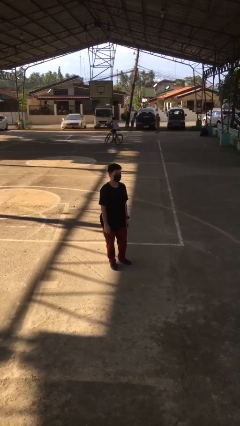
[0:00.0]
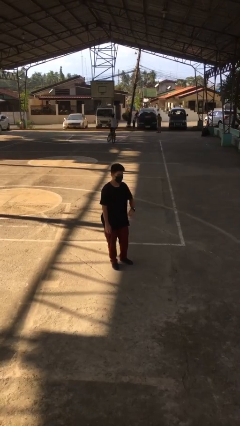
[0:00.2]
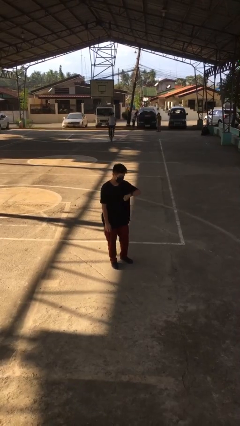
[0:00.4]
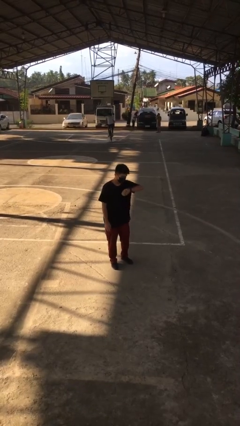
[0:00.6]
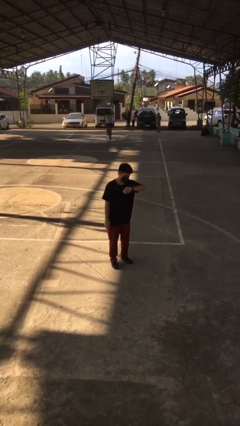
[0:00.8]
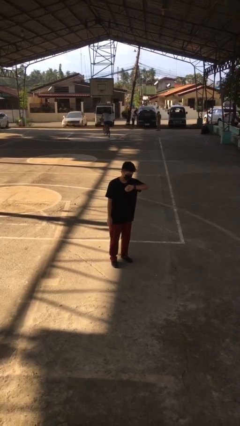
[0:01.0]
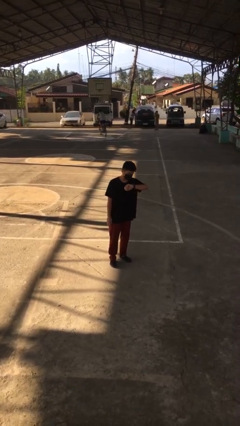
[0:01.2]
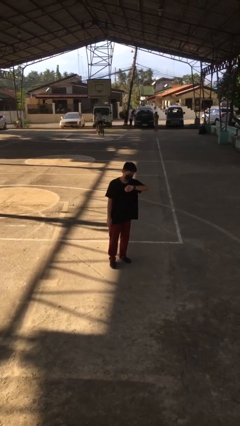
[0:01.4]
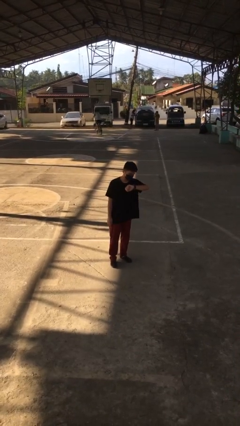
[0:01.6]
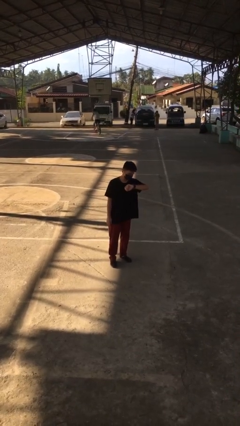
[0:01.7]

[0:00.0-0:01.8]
person looks at wristwatch

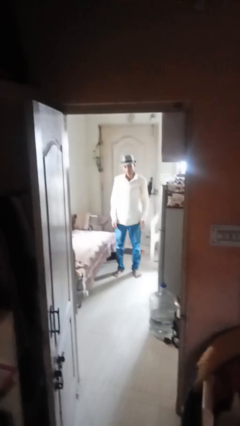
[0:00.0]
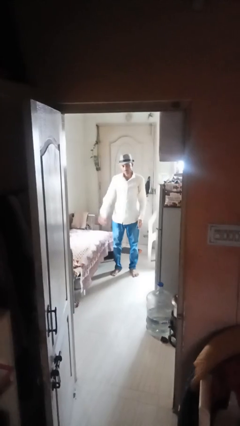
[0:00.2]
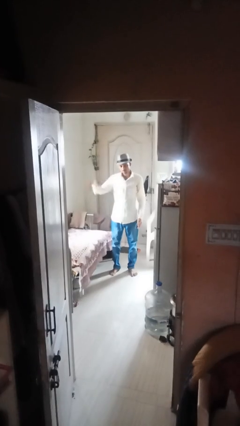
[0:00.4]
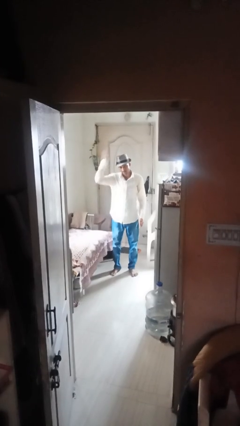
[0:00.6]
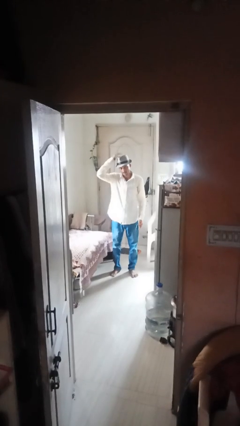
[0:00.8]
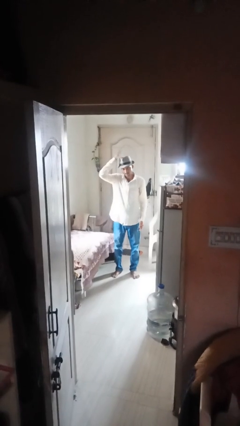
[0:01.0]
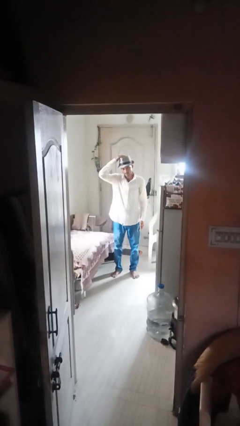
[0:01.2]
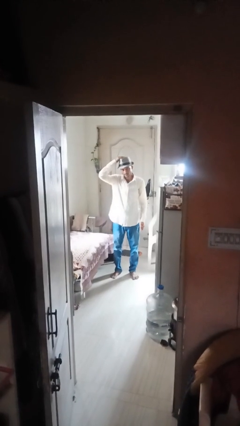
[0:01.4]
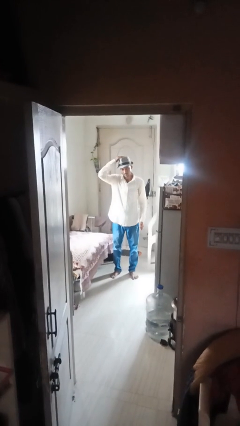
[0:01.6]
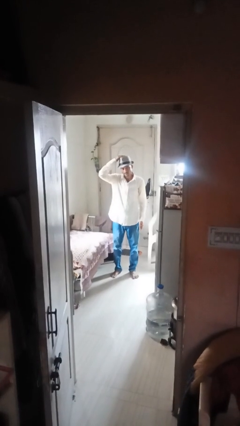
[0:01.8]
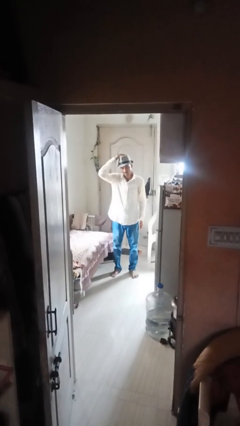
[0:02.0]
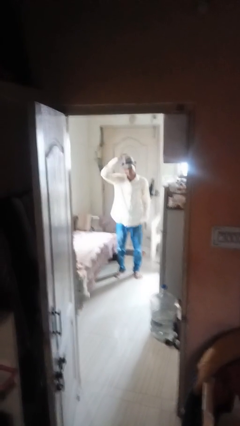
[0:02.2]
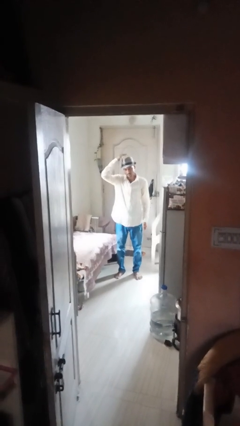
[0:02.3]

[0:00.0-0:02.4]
person pats head

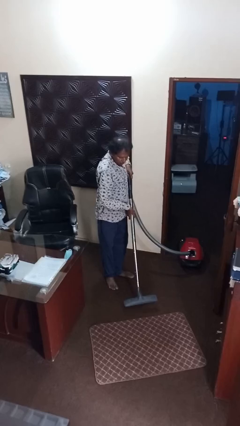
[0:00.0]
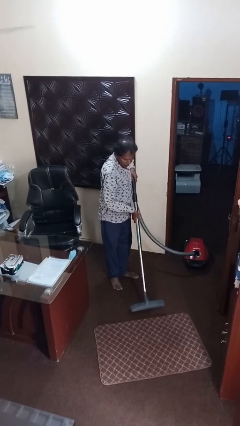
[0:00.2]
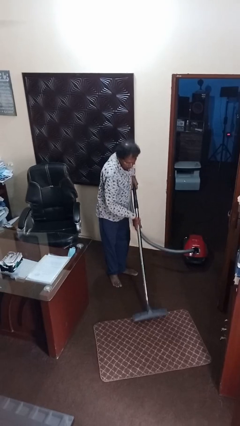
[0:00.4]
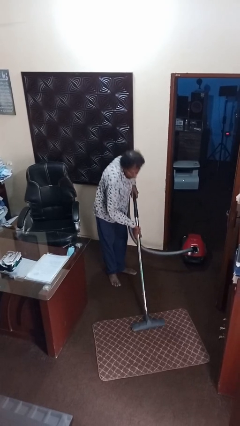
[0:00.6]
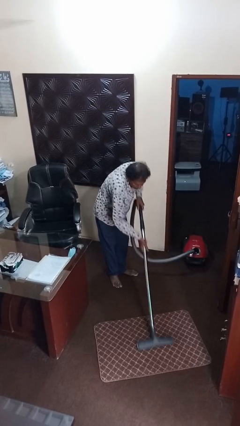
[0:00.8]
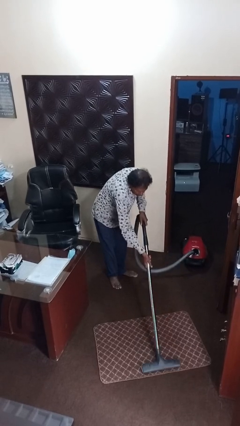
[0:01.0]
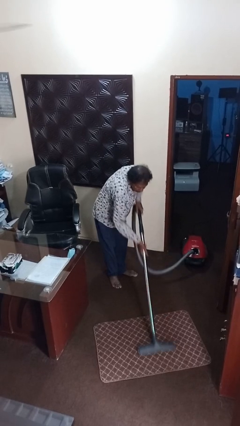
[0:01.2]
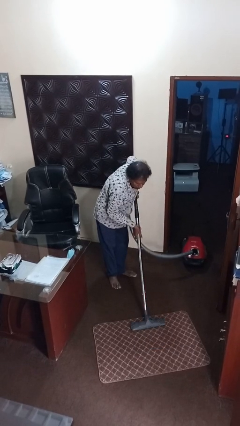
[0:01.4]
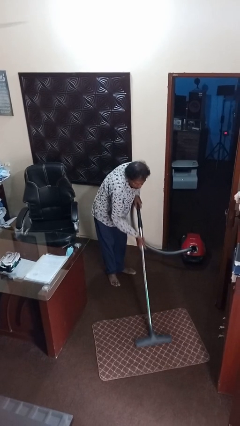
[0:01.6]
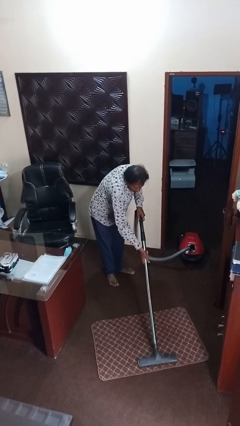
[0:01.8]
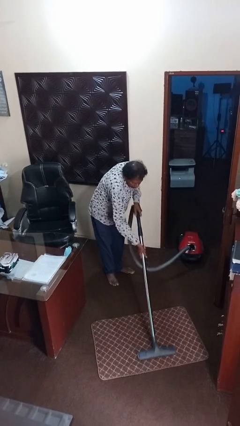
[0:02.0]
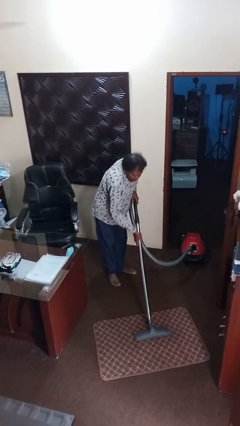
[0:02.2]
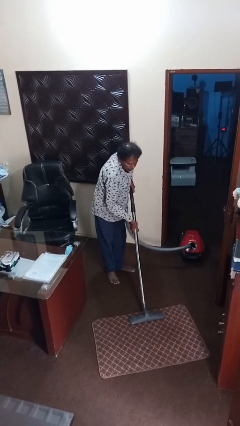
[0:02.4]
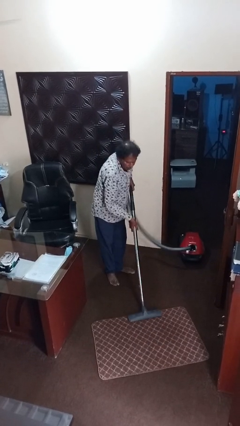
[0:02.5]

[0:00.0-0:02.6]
person vacuums carpet

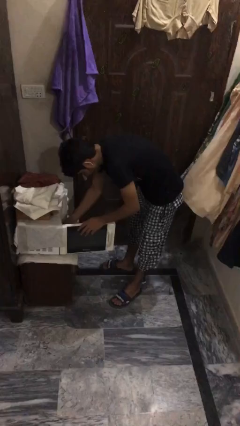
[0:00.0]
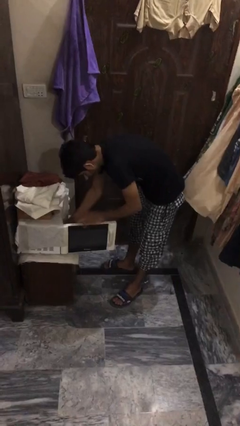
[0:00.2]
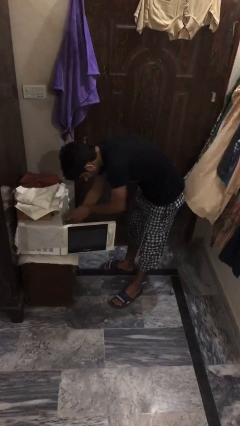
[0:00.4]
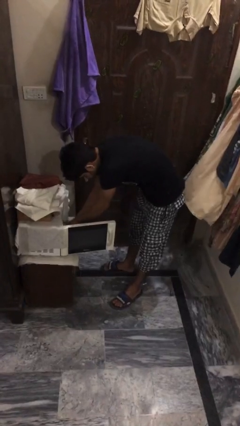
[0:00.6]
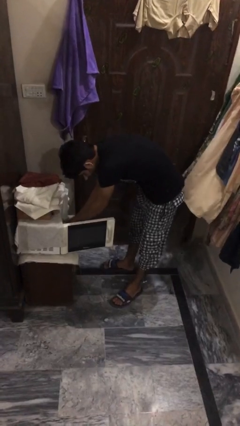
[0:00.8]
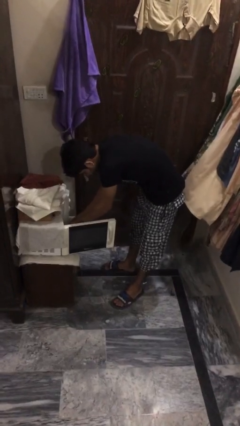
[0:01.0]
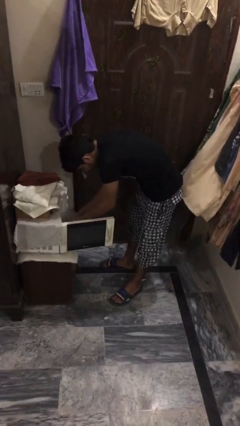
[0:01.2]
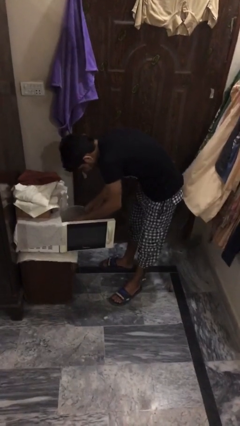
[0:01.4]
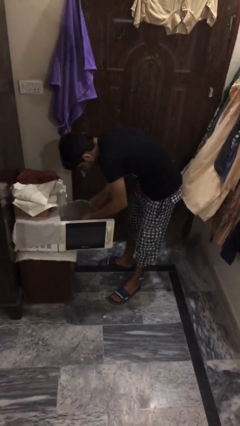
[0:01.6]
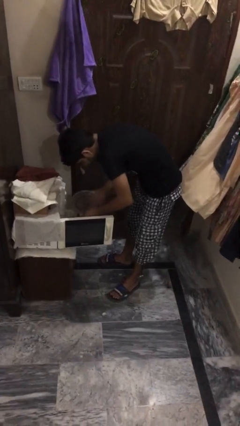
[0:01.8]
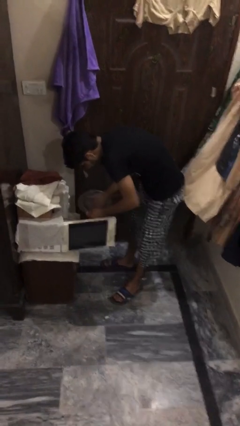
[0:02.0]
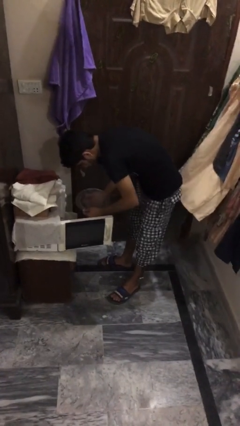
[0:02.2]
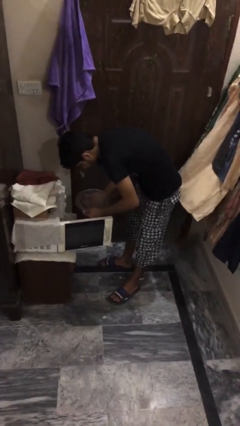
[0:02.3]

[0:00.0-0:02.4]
person takes object from oven

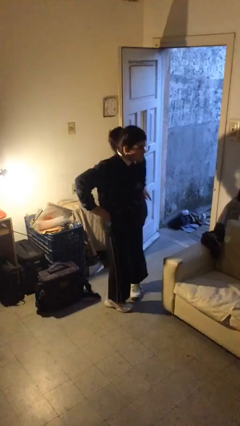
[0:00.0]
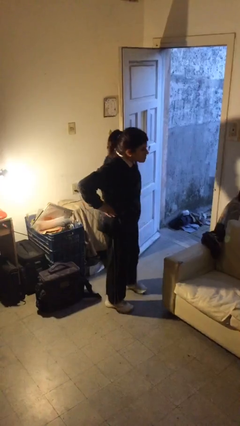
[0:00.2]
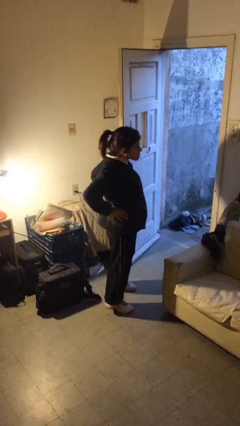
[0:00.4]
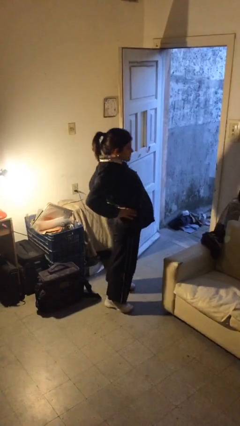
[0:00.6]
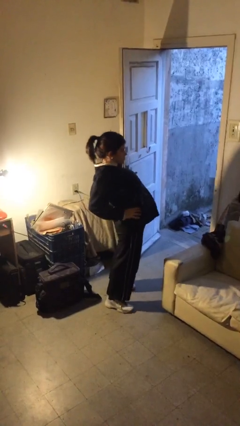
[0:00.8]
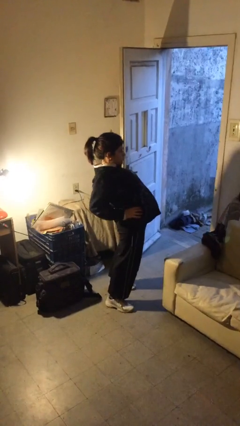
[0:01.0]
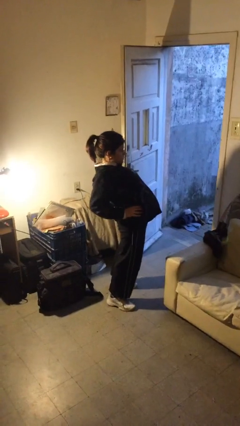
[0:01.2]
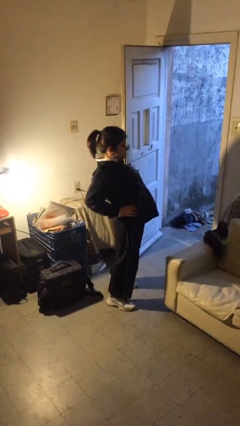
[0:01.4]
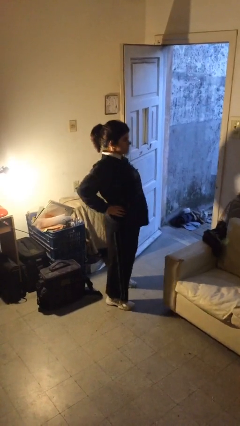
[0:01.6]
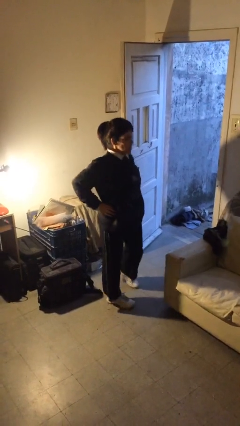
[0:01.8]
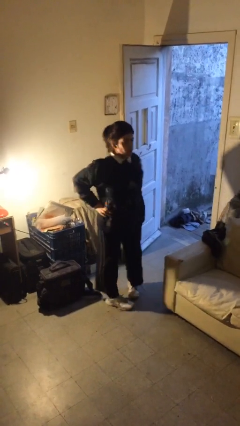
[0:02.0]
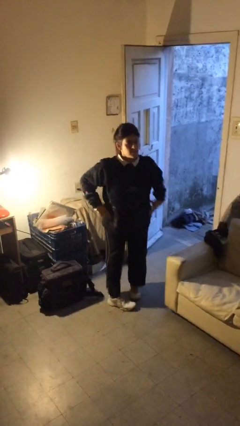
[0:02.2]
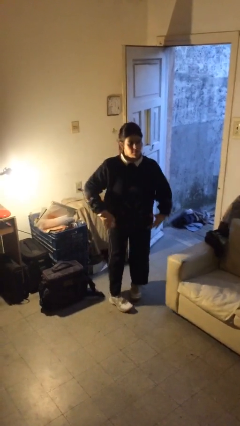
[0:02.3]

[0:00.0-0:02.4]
person stretches back

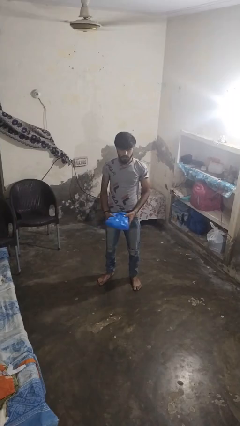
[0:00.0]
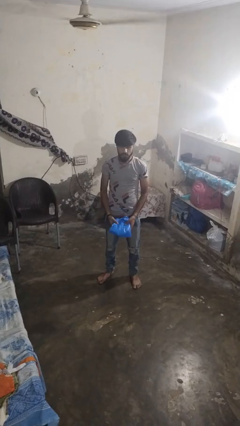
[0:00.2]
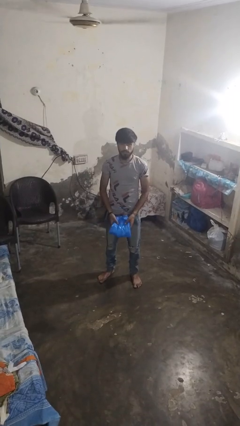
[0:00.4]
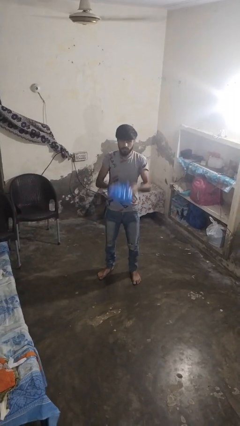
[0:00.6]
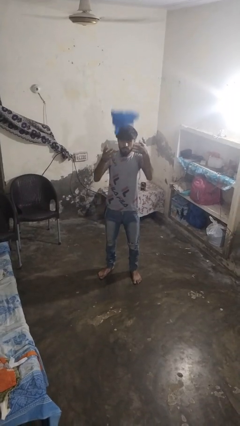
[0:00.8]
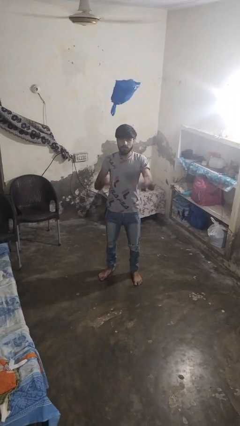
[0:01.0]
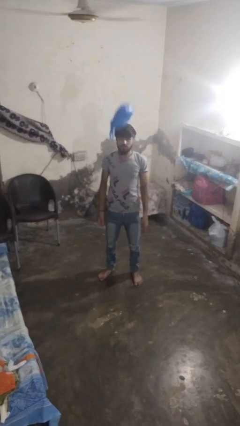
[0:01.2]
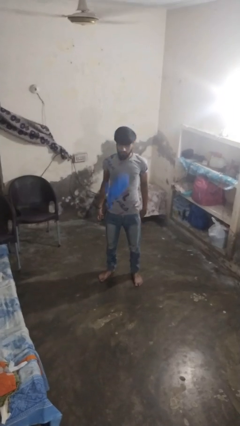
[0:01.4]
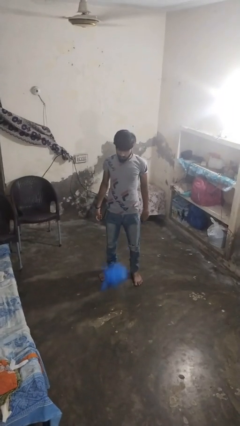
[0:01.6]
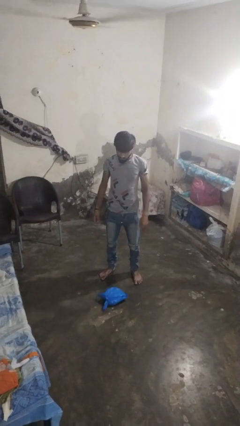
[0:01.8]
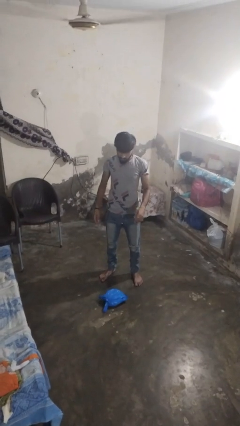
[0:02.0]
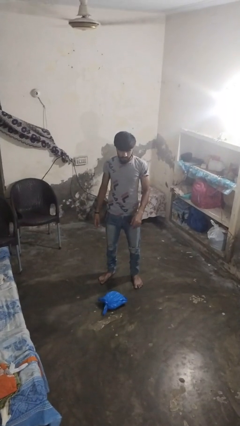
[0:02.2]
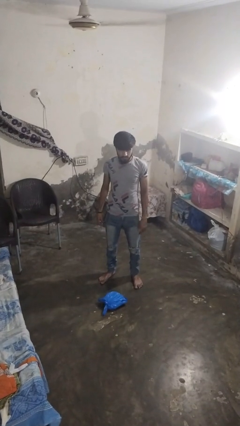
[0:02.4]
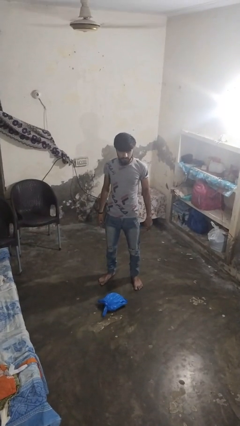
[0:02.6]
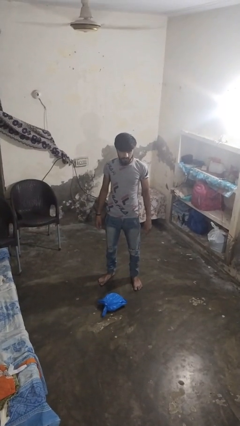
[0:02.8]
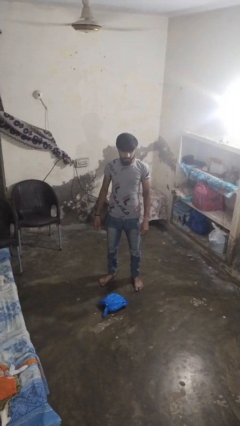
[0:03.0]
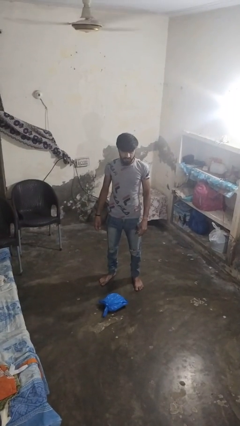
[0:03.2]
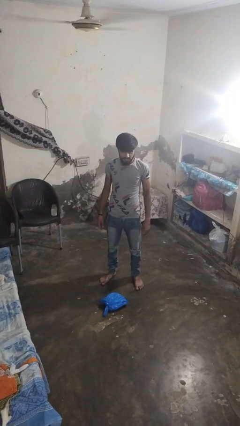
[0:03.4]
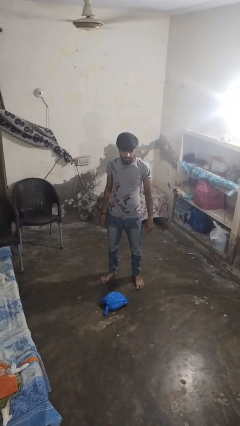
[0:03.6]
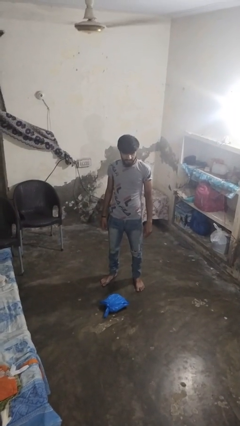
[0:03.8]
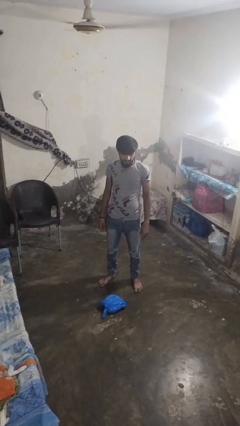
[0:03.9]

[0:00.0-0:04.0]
person throws object into air

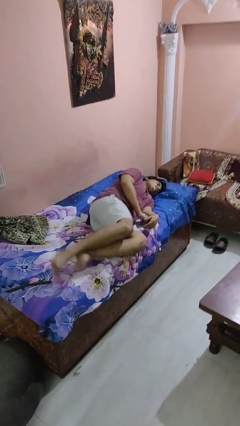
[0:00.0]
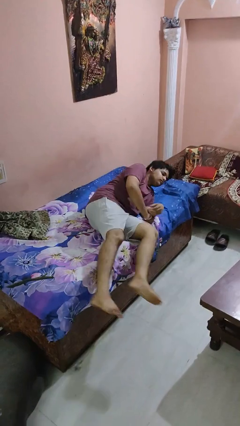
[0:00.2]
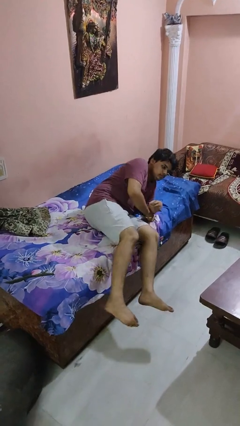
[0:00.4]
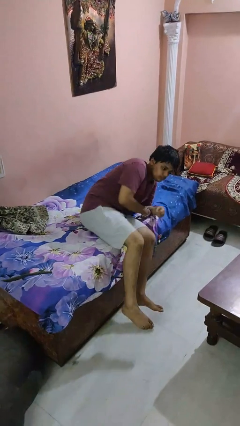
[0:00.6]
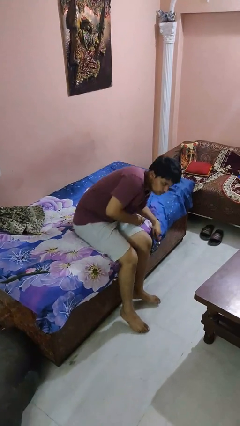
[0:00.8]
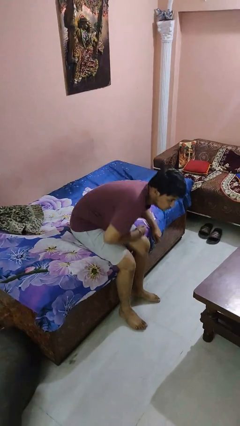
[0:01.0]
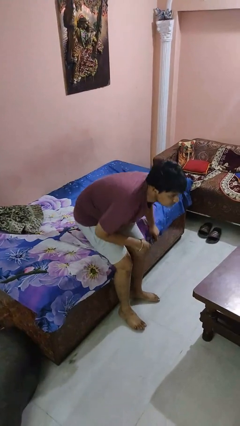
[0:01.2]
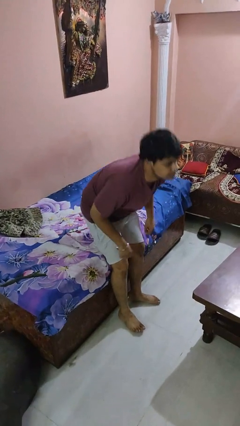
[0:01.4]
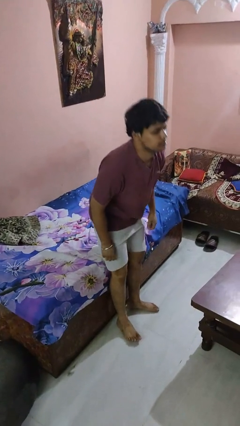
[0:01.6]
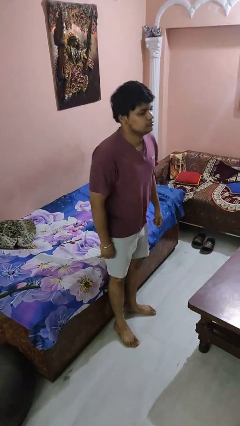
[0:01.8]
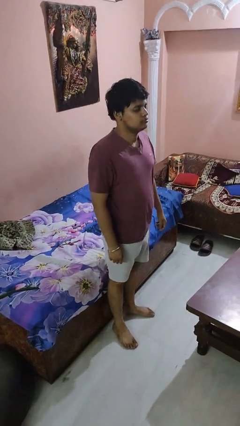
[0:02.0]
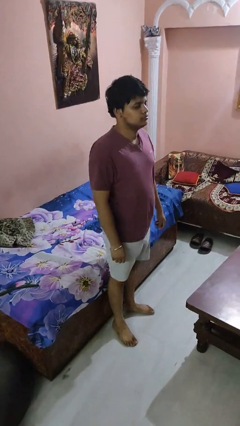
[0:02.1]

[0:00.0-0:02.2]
person stands up
